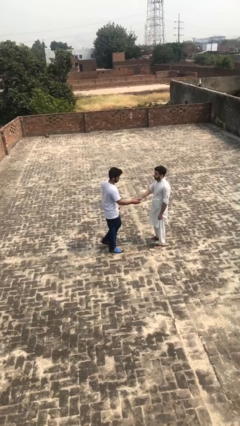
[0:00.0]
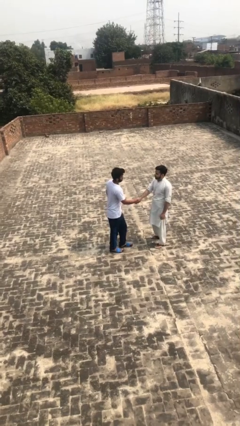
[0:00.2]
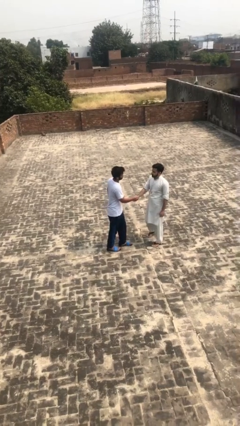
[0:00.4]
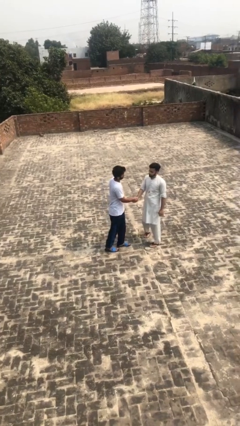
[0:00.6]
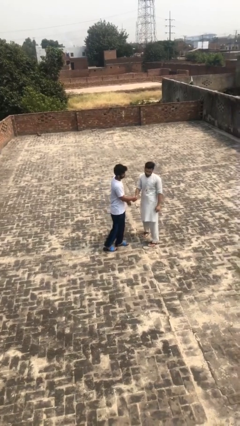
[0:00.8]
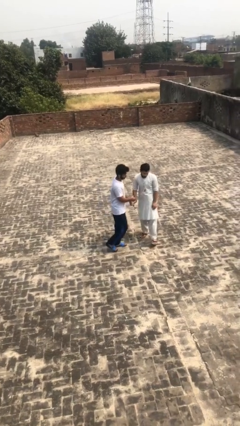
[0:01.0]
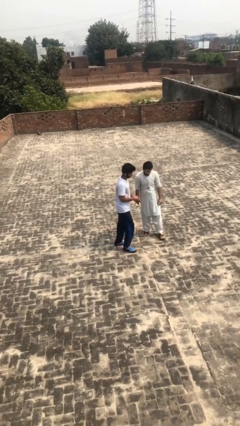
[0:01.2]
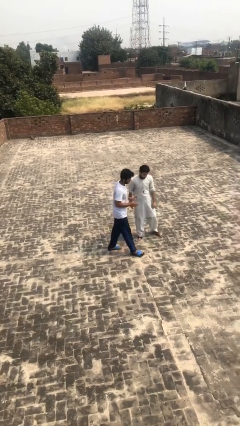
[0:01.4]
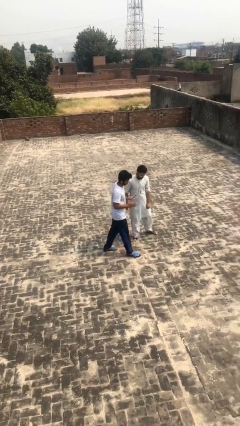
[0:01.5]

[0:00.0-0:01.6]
person shakes hand

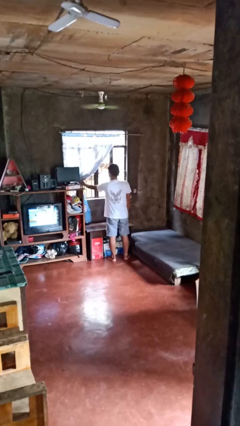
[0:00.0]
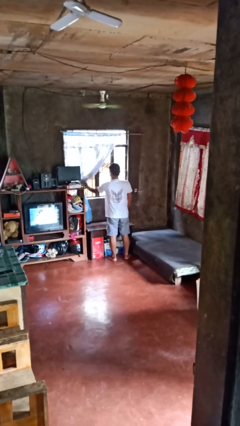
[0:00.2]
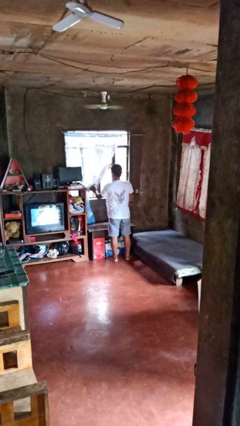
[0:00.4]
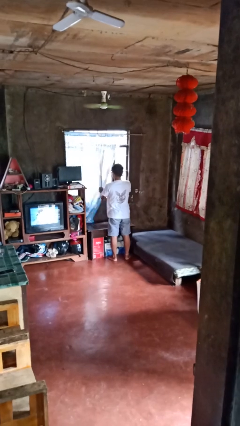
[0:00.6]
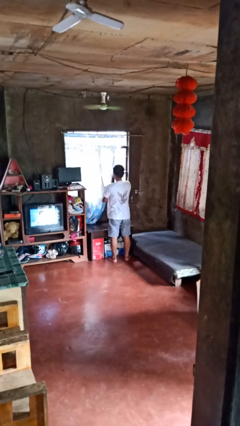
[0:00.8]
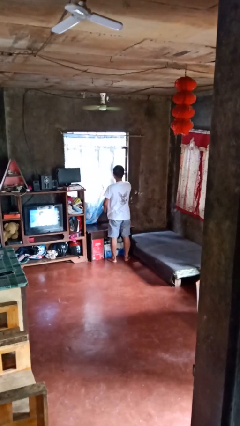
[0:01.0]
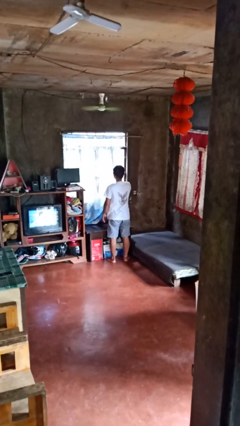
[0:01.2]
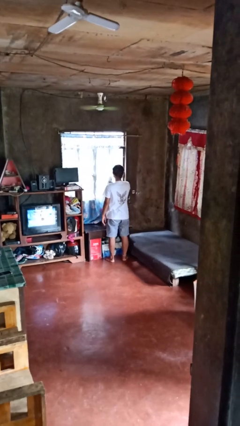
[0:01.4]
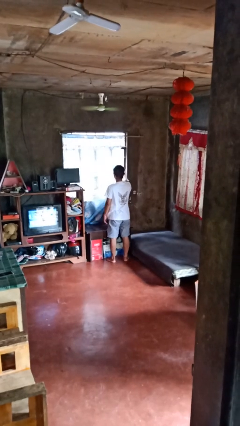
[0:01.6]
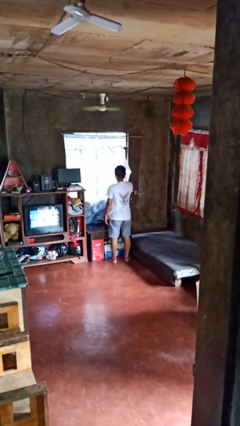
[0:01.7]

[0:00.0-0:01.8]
person closes curtains

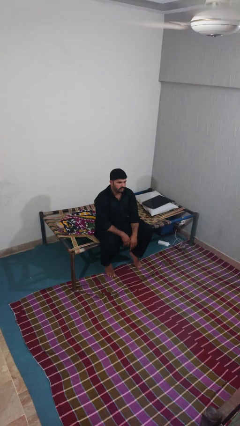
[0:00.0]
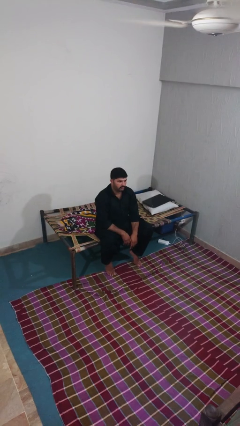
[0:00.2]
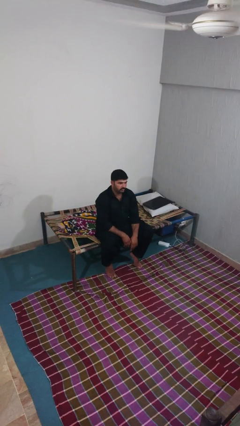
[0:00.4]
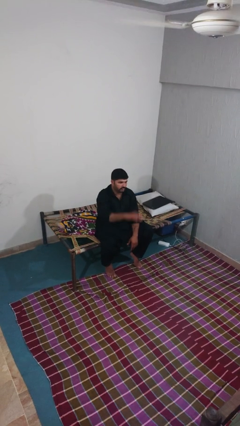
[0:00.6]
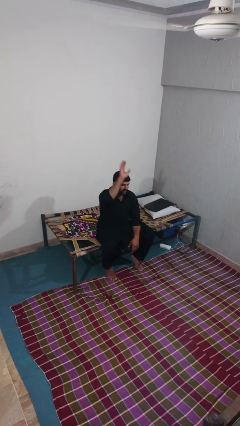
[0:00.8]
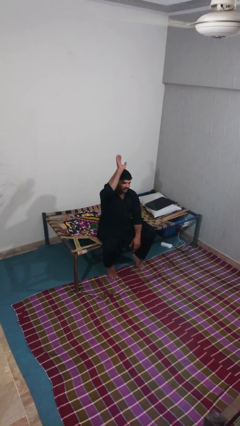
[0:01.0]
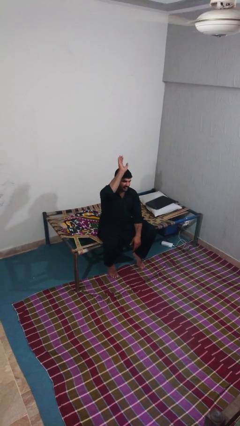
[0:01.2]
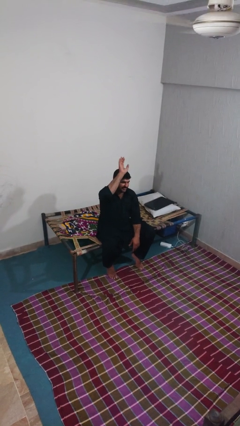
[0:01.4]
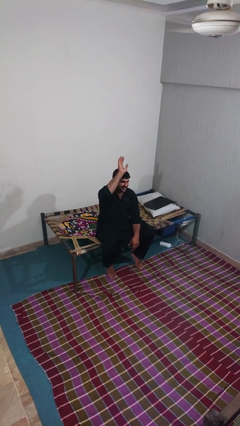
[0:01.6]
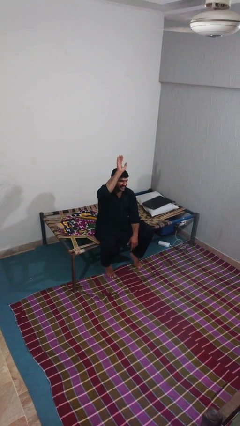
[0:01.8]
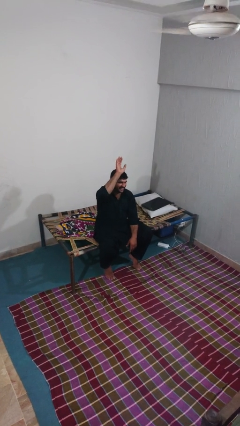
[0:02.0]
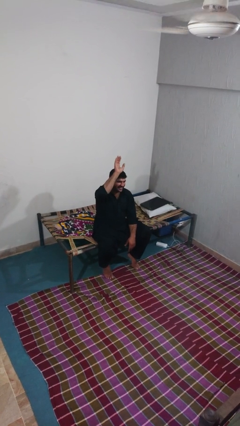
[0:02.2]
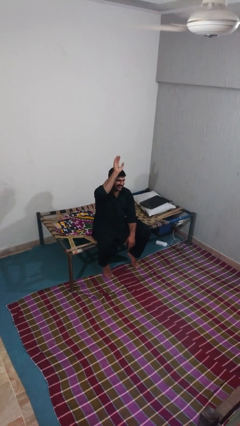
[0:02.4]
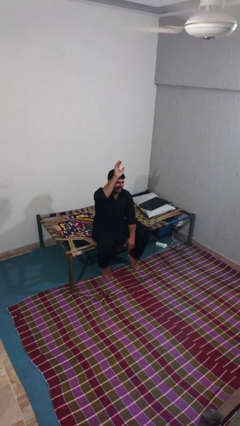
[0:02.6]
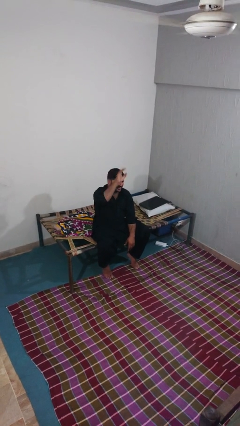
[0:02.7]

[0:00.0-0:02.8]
person gestures raise hand

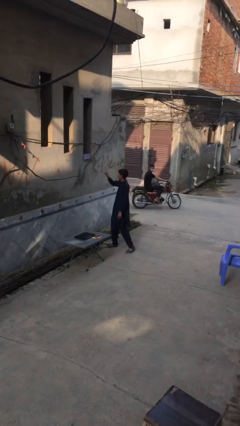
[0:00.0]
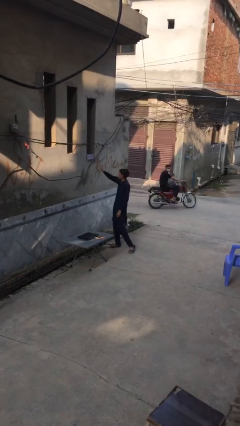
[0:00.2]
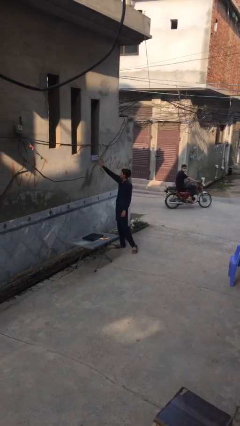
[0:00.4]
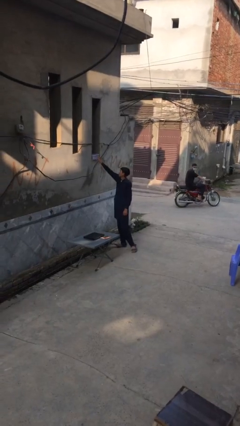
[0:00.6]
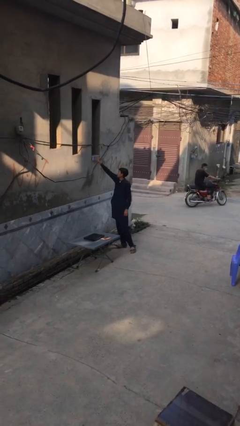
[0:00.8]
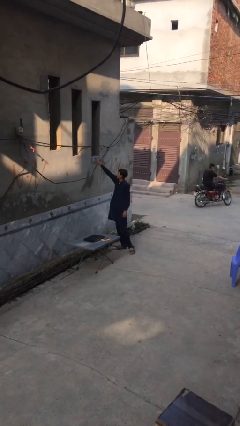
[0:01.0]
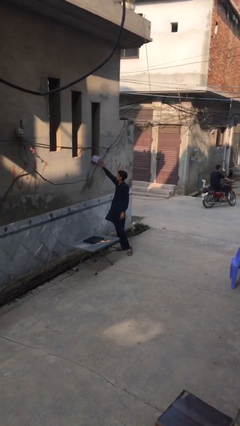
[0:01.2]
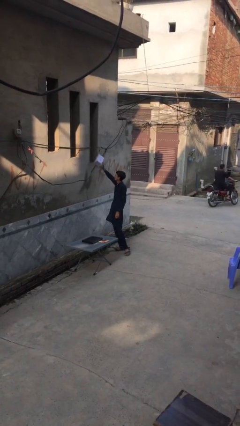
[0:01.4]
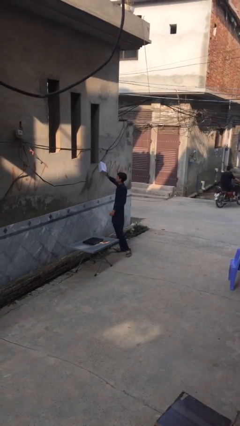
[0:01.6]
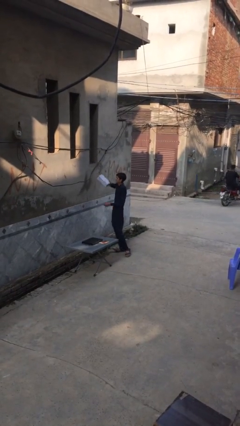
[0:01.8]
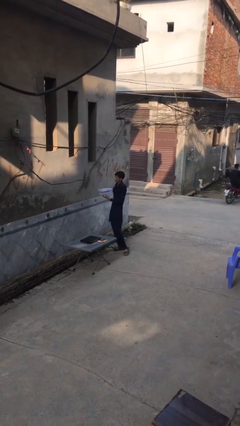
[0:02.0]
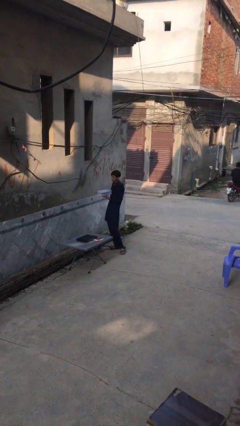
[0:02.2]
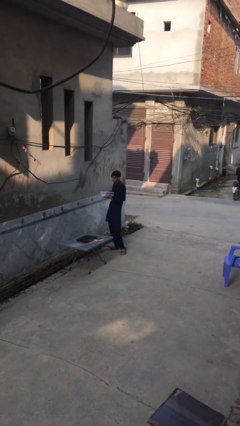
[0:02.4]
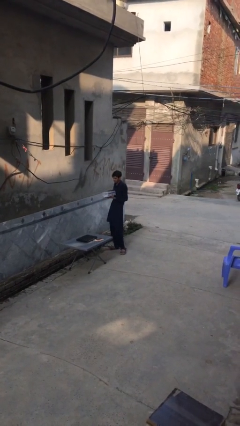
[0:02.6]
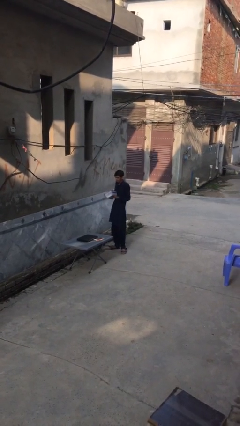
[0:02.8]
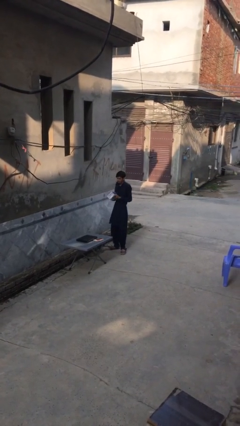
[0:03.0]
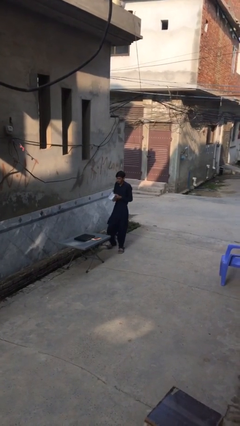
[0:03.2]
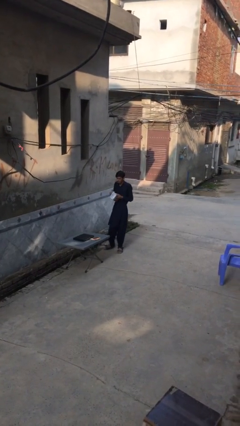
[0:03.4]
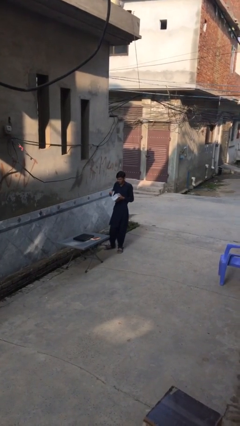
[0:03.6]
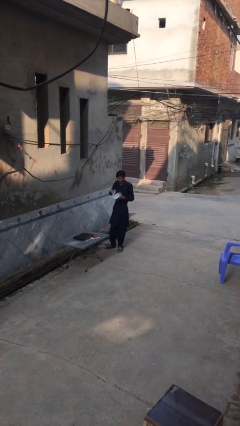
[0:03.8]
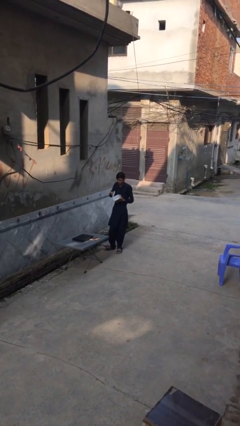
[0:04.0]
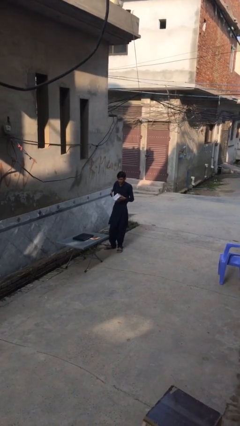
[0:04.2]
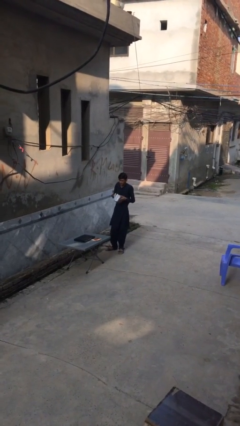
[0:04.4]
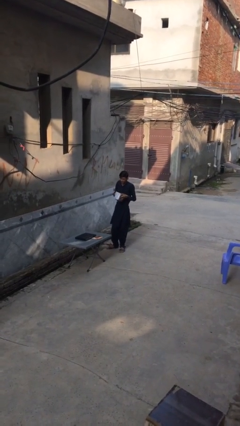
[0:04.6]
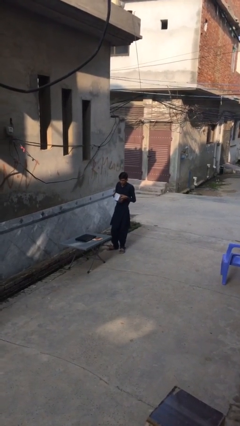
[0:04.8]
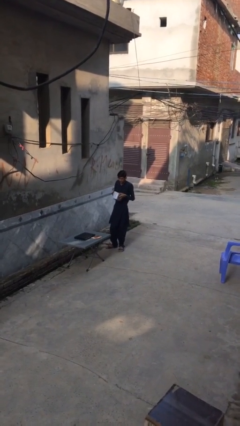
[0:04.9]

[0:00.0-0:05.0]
person picks up object from shelf

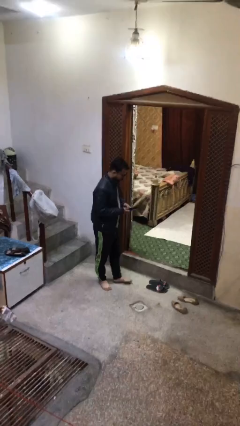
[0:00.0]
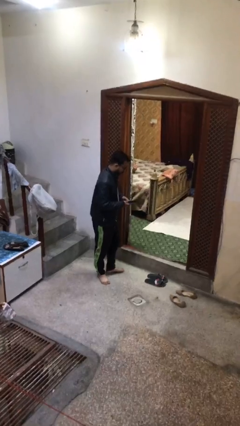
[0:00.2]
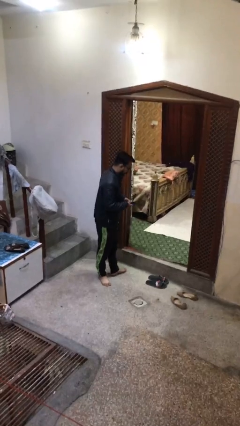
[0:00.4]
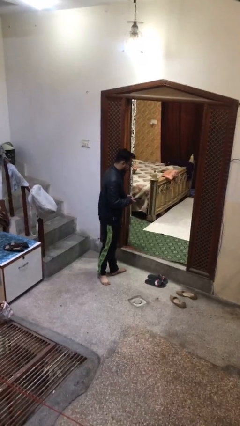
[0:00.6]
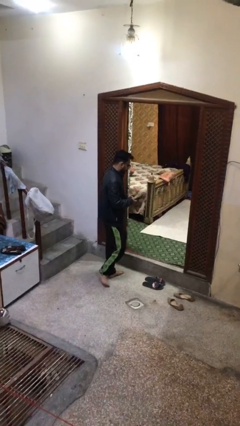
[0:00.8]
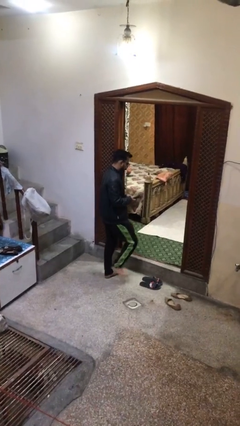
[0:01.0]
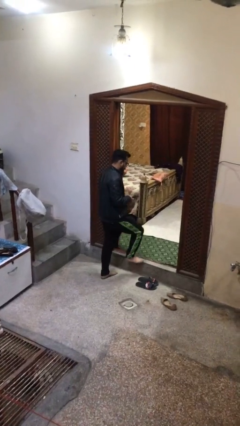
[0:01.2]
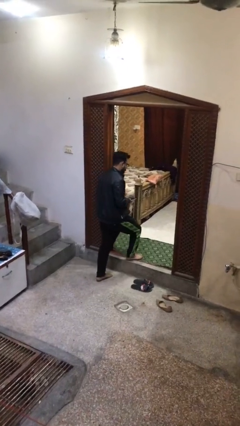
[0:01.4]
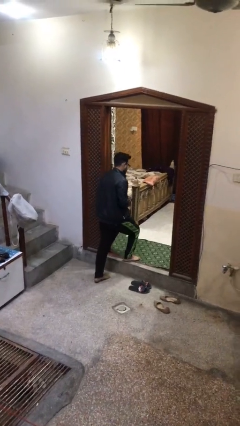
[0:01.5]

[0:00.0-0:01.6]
person exits scene through structure

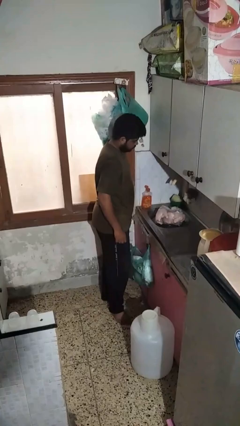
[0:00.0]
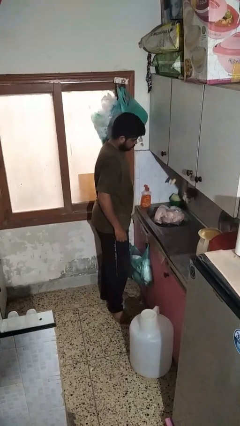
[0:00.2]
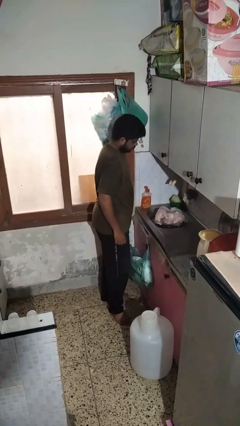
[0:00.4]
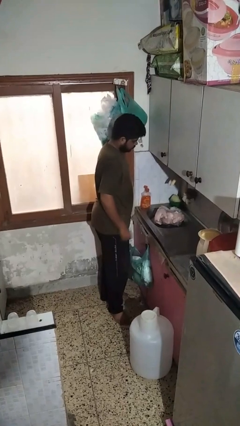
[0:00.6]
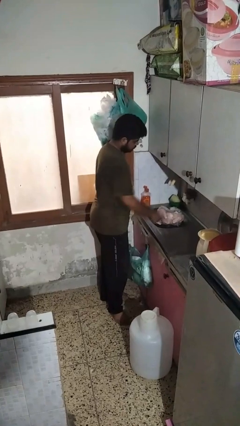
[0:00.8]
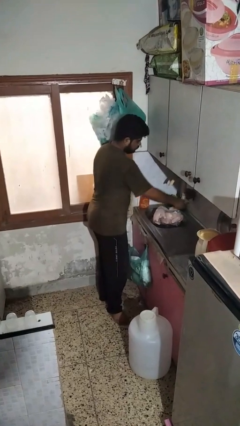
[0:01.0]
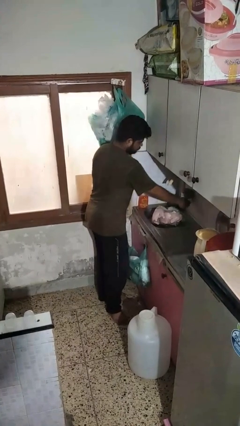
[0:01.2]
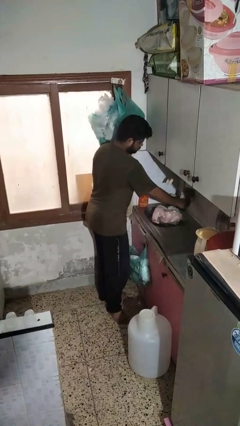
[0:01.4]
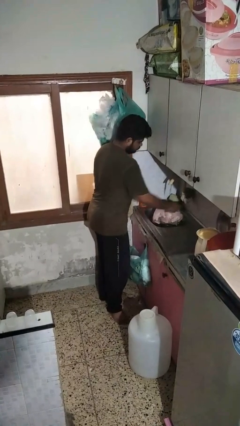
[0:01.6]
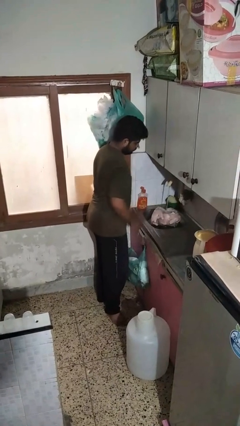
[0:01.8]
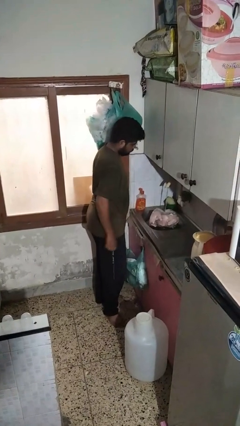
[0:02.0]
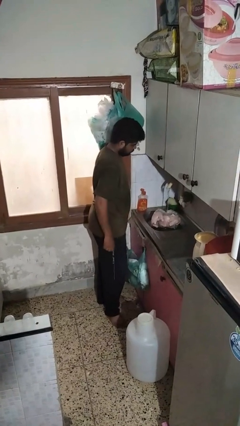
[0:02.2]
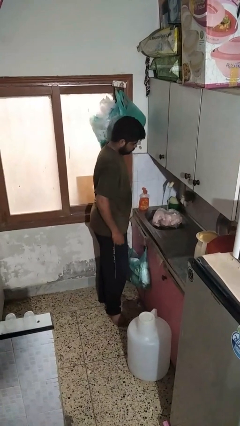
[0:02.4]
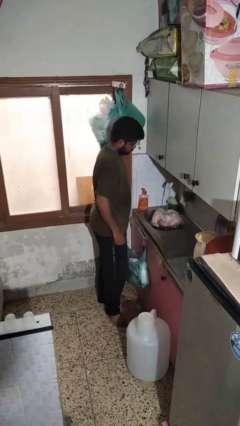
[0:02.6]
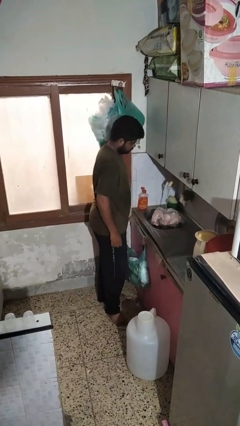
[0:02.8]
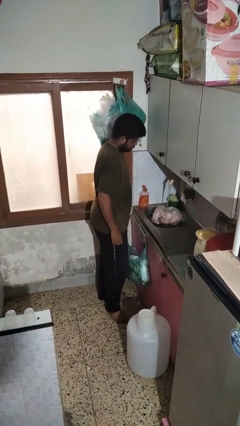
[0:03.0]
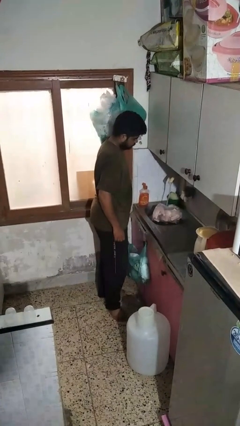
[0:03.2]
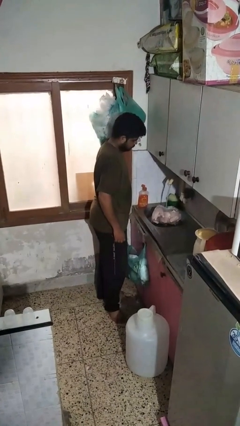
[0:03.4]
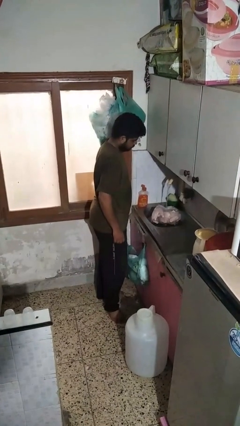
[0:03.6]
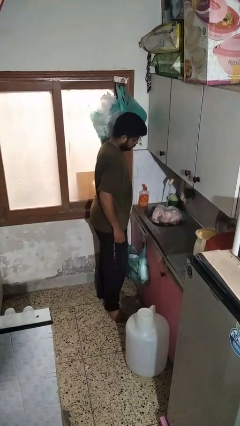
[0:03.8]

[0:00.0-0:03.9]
person turns on faucet

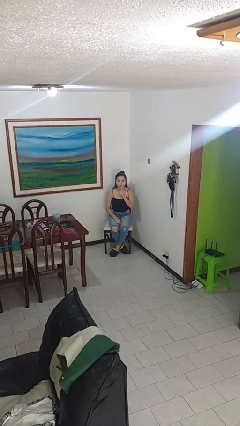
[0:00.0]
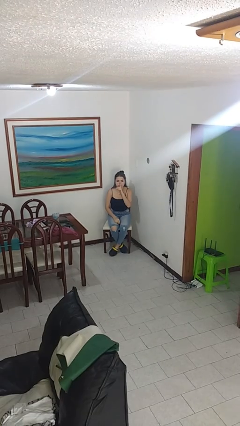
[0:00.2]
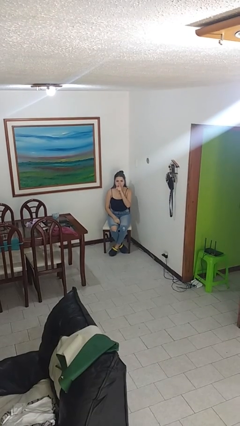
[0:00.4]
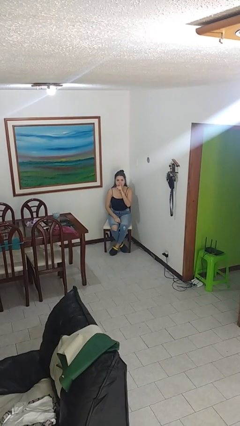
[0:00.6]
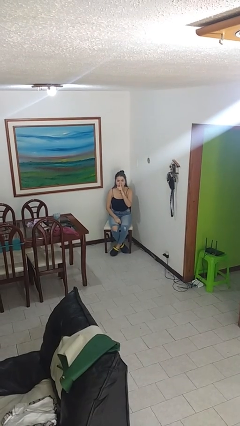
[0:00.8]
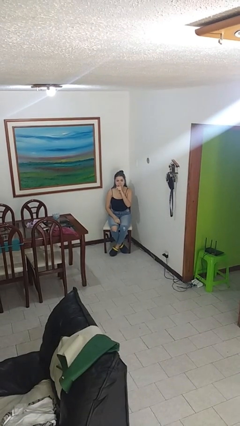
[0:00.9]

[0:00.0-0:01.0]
person gestures be quiet
